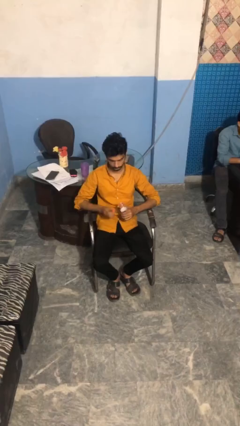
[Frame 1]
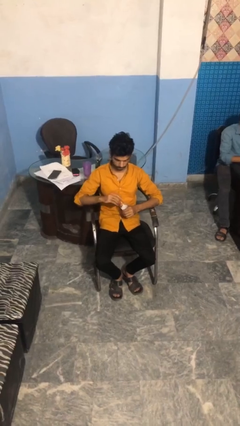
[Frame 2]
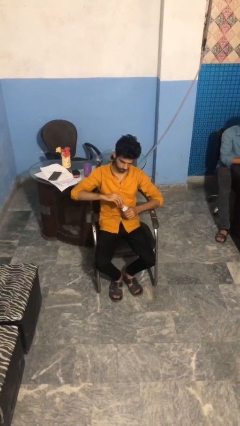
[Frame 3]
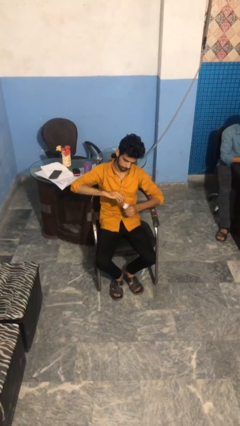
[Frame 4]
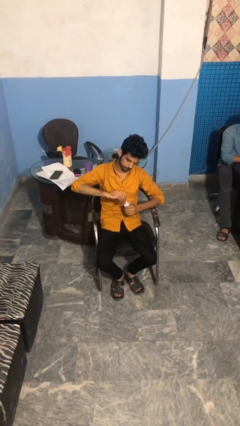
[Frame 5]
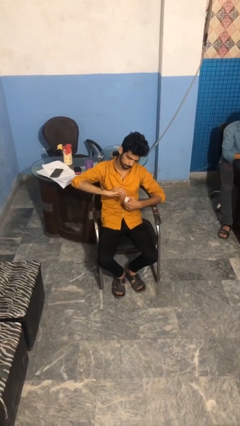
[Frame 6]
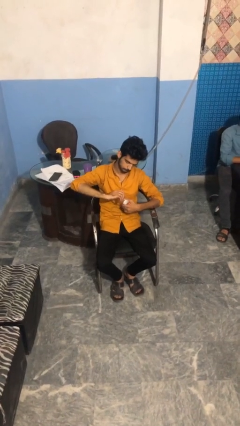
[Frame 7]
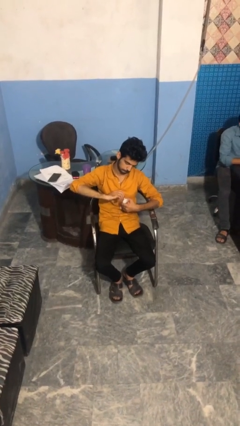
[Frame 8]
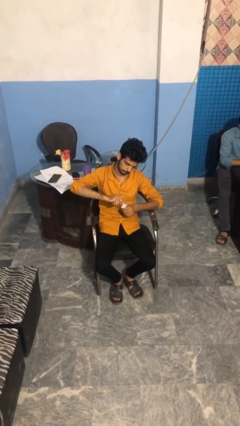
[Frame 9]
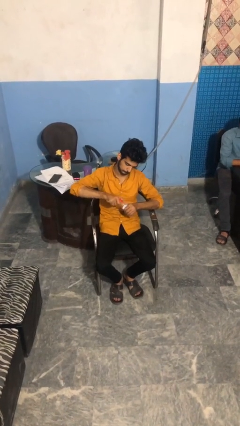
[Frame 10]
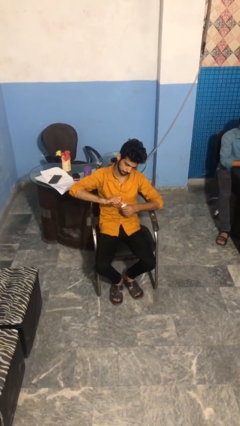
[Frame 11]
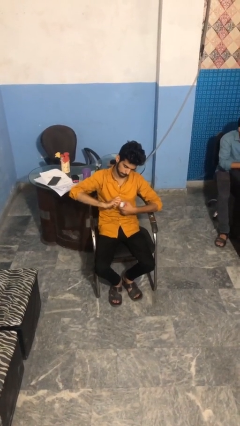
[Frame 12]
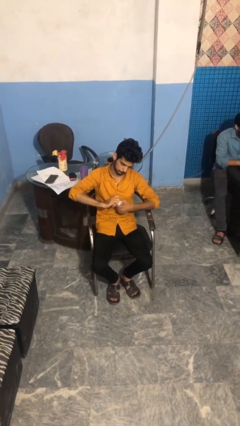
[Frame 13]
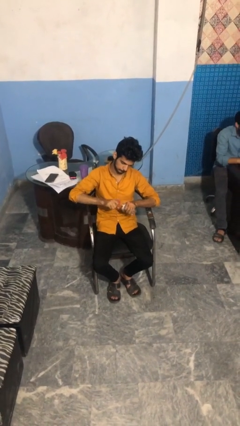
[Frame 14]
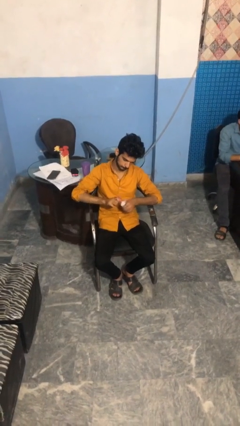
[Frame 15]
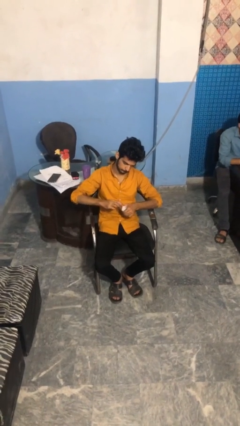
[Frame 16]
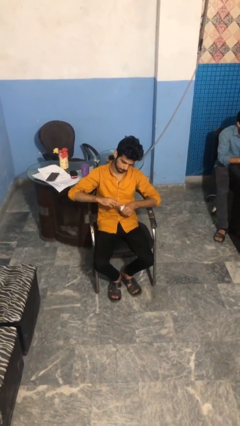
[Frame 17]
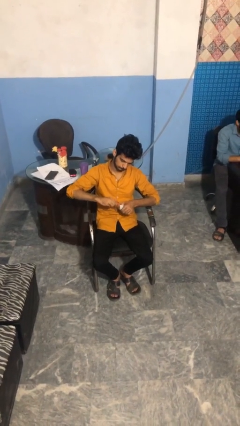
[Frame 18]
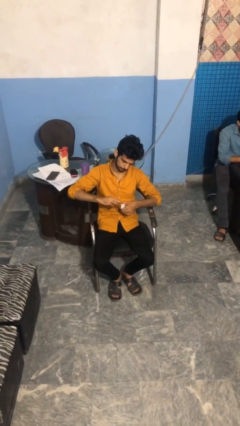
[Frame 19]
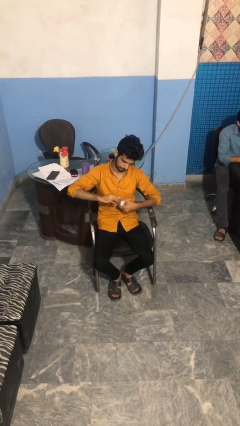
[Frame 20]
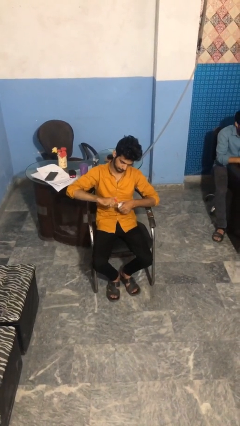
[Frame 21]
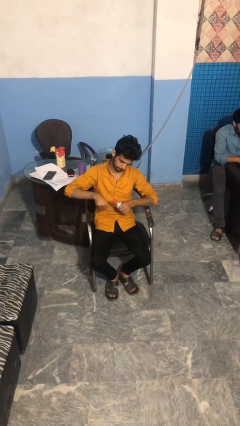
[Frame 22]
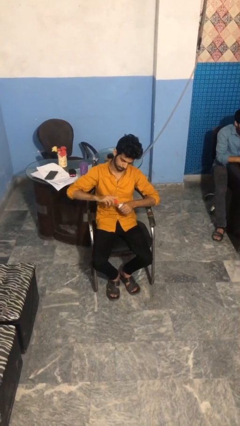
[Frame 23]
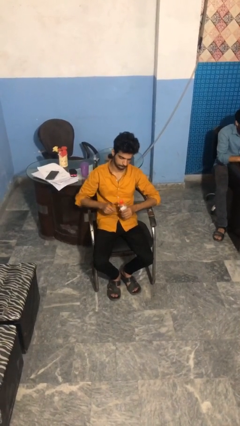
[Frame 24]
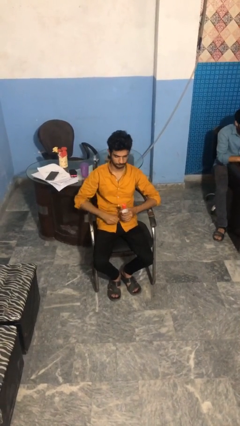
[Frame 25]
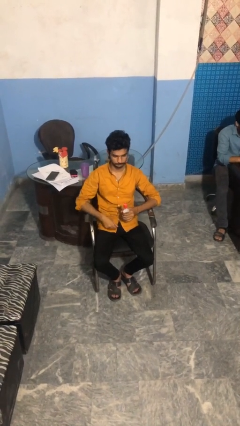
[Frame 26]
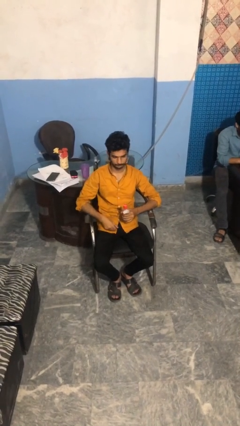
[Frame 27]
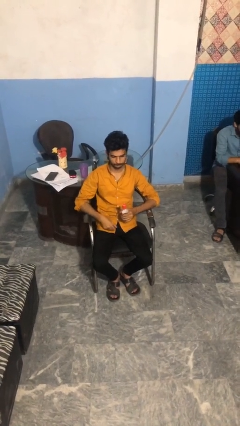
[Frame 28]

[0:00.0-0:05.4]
person screws lid to bottle

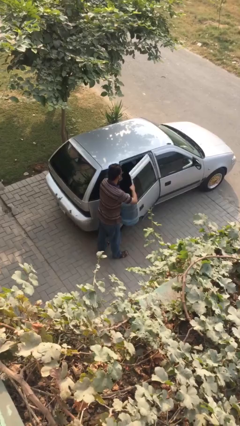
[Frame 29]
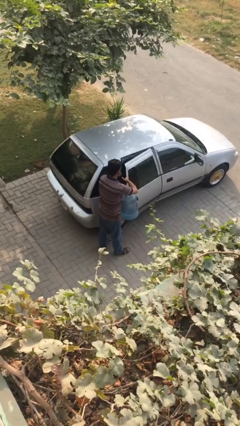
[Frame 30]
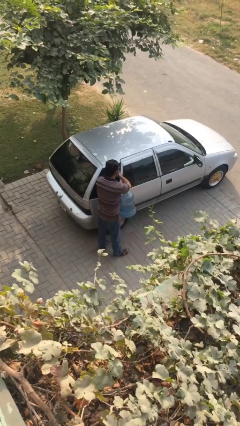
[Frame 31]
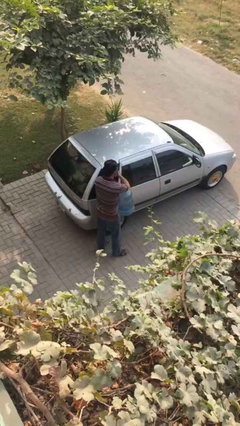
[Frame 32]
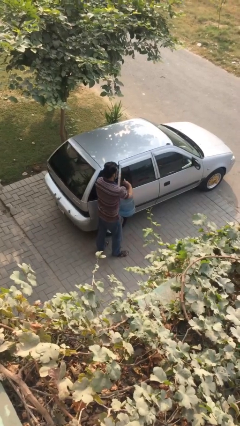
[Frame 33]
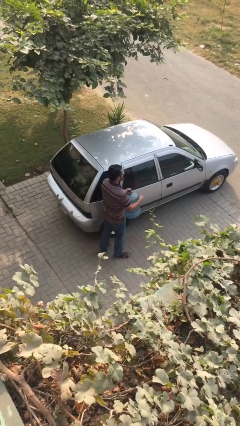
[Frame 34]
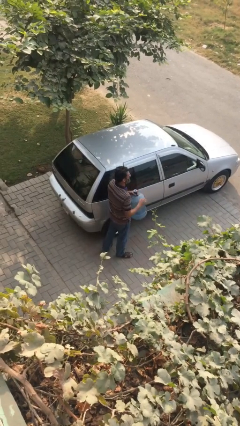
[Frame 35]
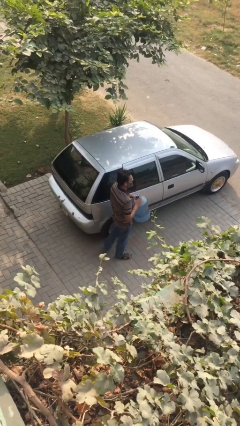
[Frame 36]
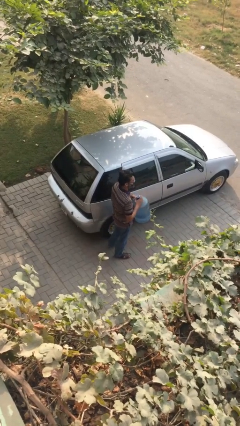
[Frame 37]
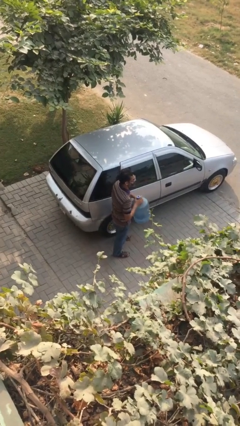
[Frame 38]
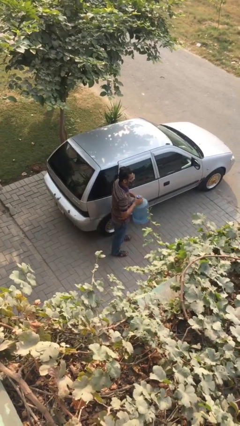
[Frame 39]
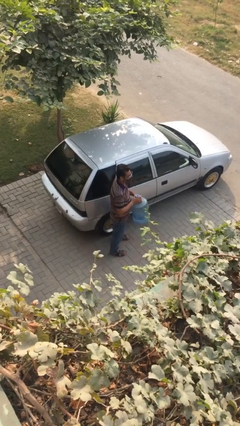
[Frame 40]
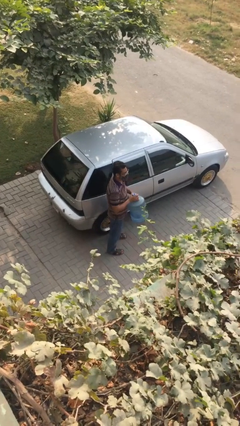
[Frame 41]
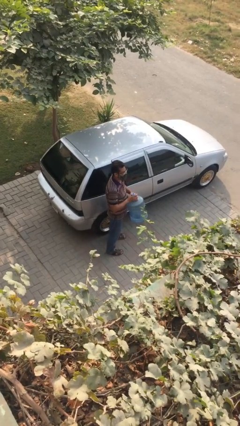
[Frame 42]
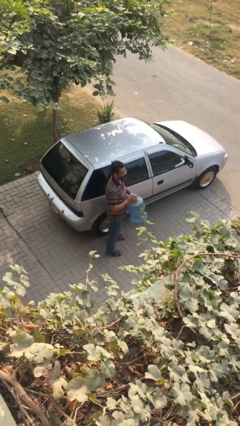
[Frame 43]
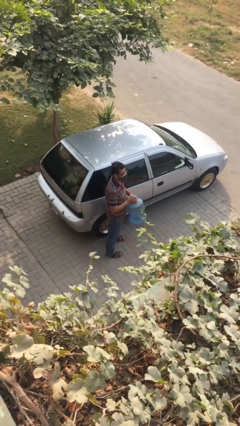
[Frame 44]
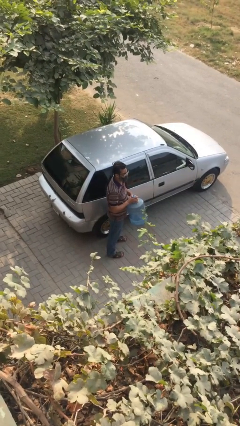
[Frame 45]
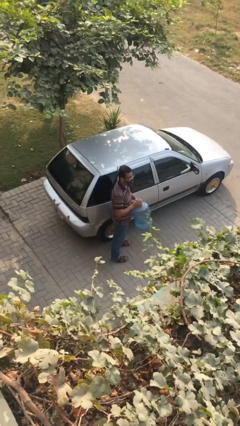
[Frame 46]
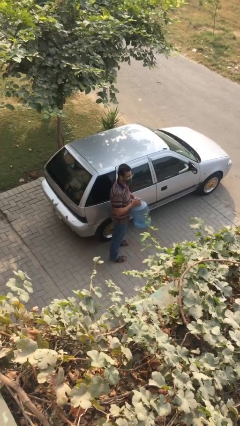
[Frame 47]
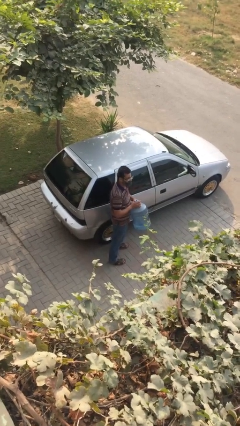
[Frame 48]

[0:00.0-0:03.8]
person closes car door

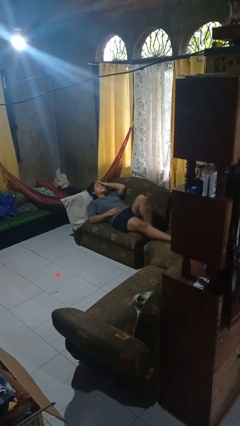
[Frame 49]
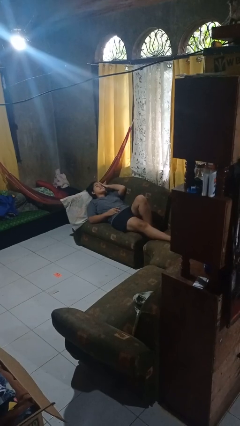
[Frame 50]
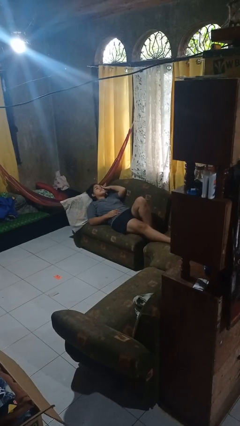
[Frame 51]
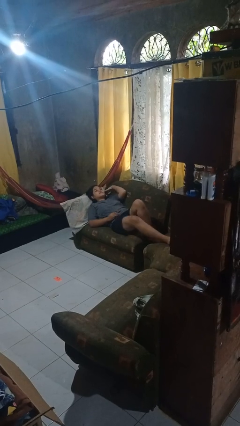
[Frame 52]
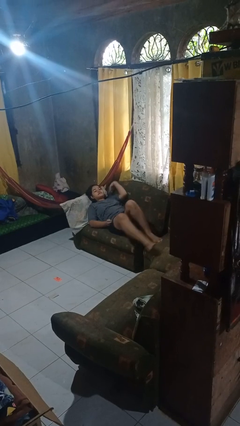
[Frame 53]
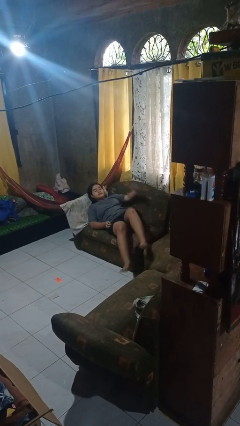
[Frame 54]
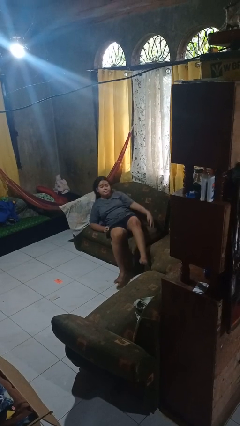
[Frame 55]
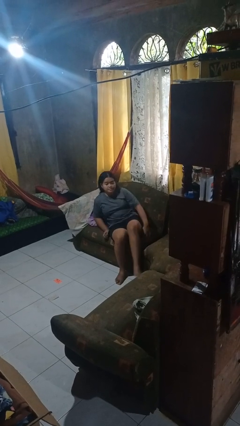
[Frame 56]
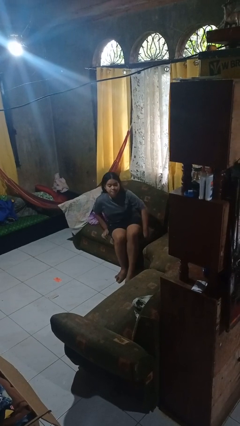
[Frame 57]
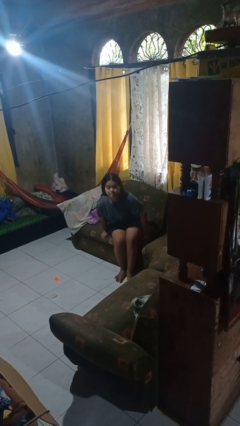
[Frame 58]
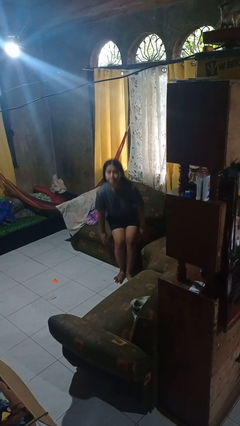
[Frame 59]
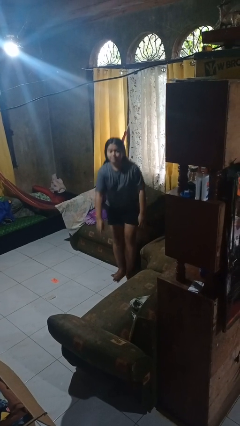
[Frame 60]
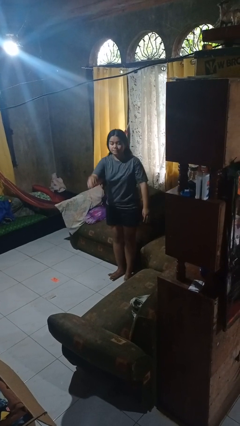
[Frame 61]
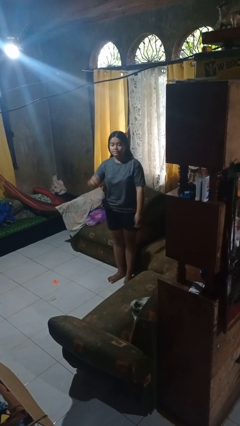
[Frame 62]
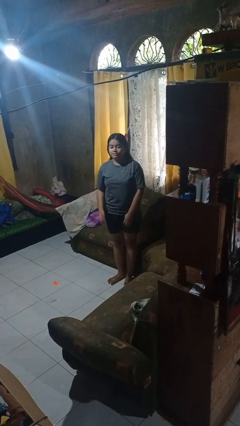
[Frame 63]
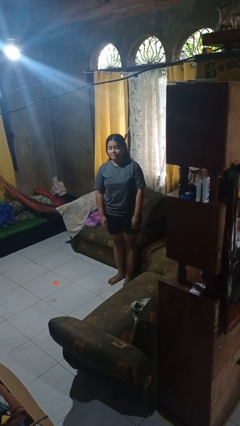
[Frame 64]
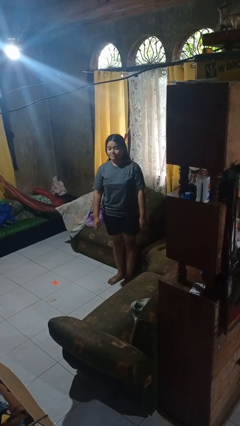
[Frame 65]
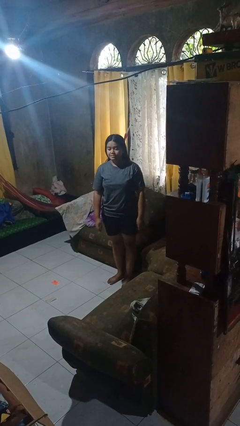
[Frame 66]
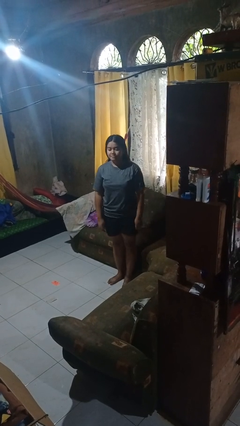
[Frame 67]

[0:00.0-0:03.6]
person stands up

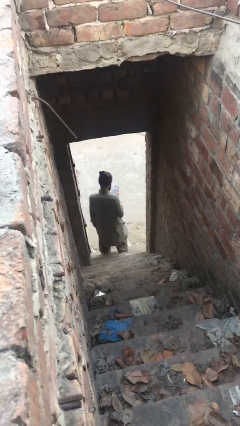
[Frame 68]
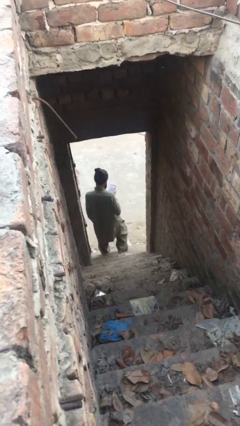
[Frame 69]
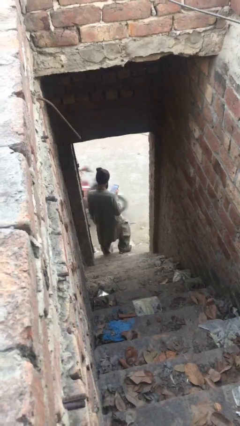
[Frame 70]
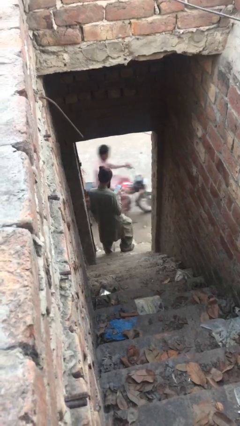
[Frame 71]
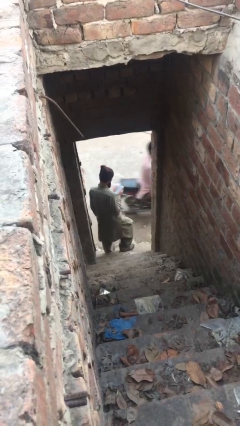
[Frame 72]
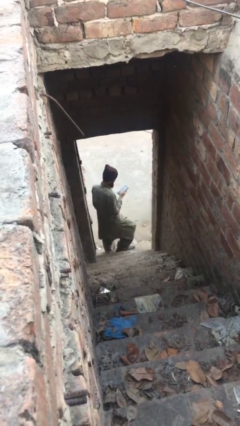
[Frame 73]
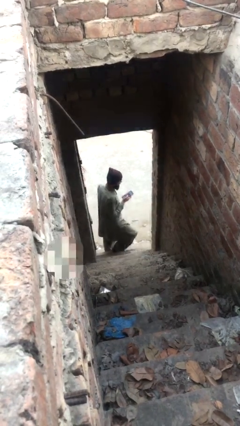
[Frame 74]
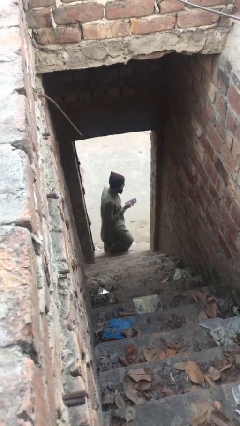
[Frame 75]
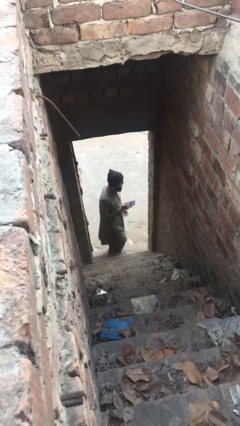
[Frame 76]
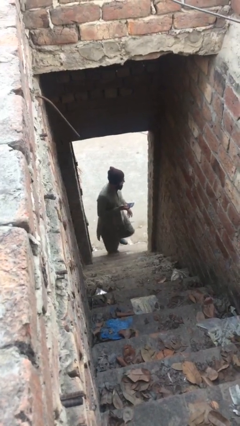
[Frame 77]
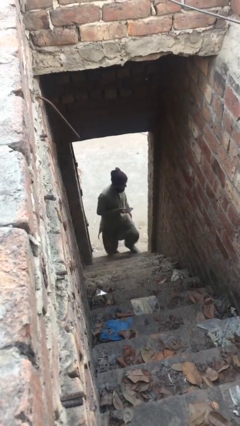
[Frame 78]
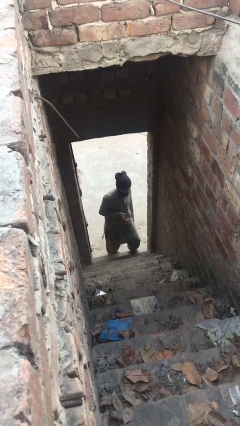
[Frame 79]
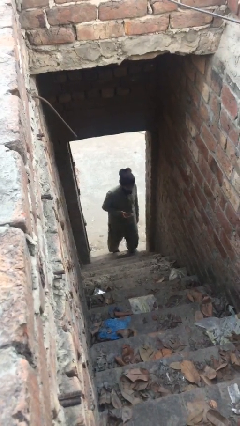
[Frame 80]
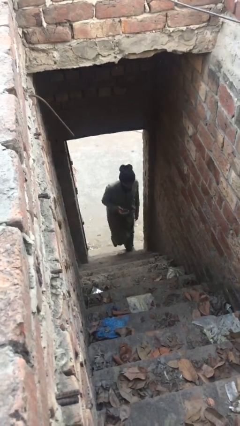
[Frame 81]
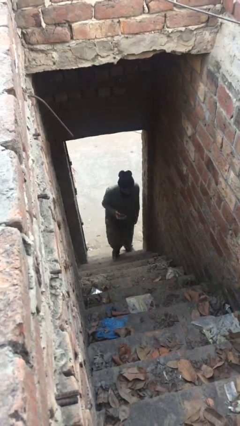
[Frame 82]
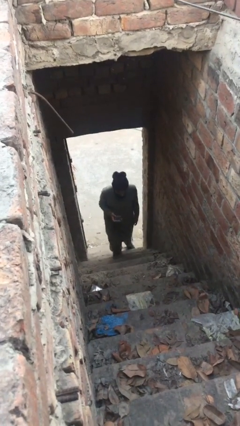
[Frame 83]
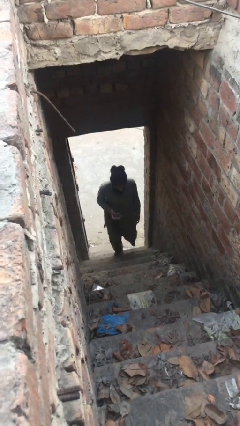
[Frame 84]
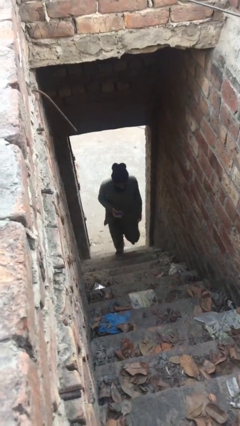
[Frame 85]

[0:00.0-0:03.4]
person enters scene through structure

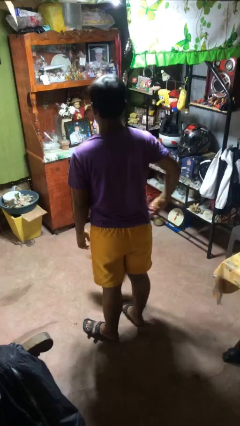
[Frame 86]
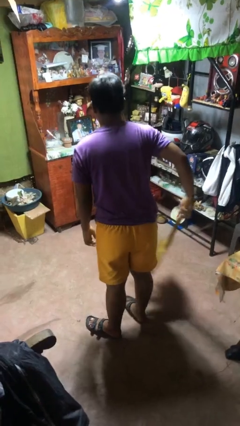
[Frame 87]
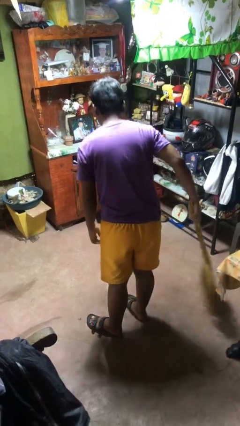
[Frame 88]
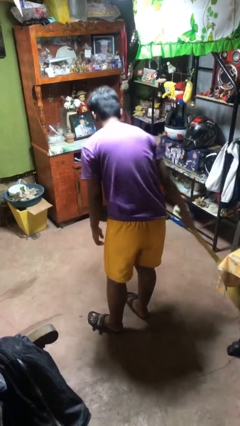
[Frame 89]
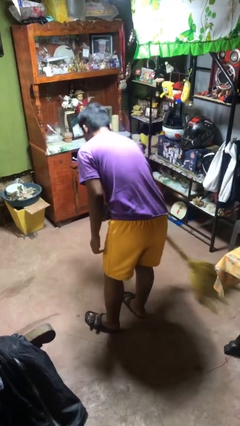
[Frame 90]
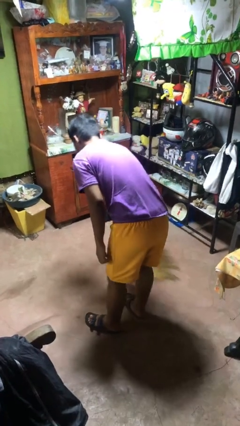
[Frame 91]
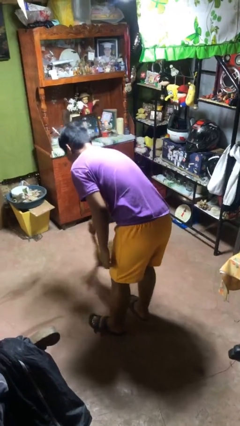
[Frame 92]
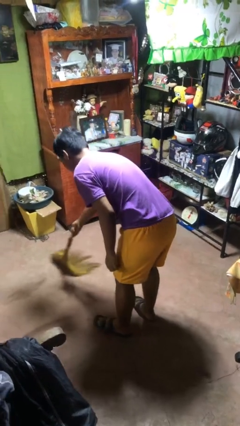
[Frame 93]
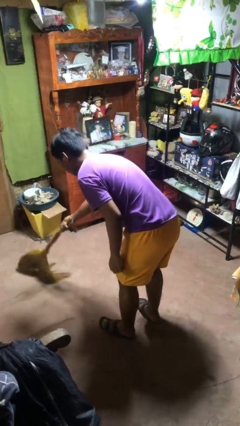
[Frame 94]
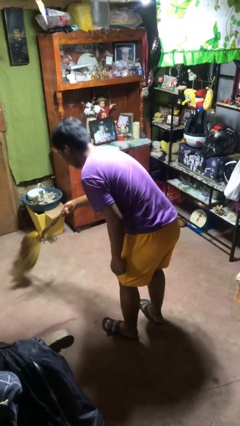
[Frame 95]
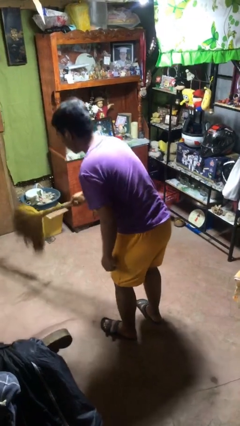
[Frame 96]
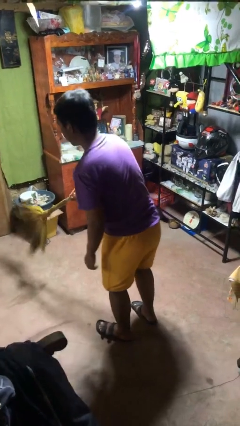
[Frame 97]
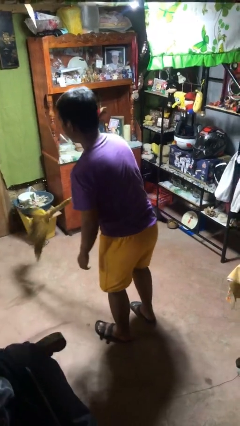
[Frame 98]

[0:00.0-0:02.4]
person sweeps floor
